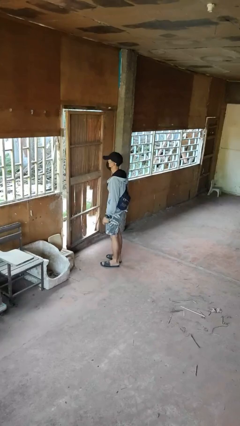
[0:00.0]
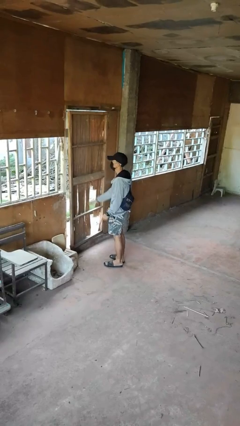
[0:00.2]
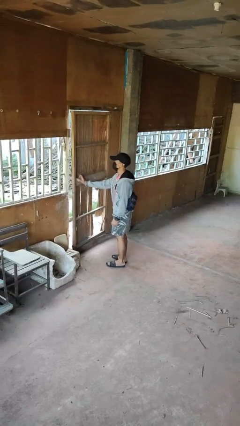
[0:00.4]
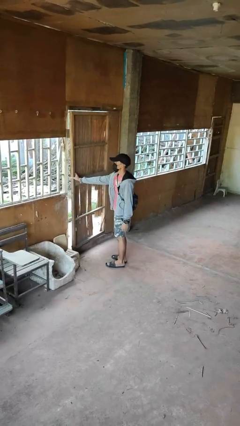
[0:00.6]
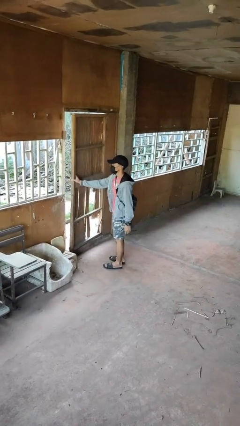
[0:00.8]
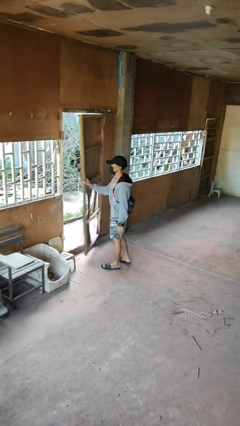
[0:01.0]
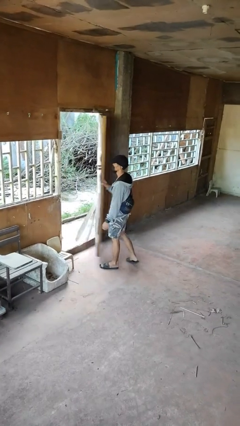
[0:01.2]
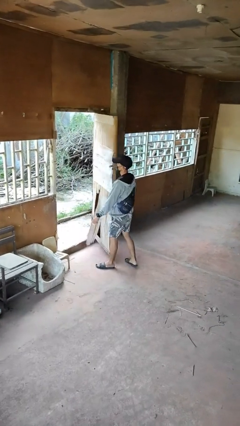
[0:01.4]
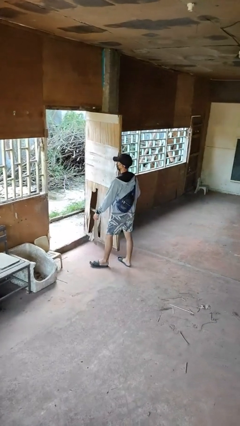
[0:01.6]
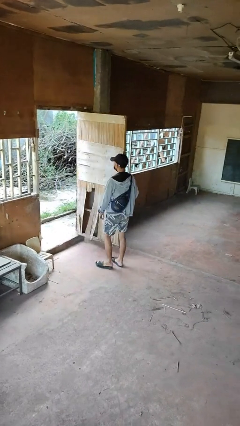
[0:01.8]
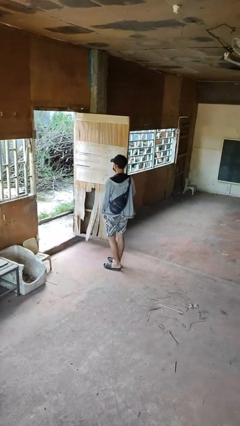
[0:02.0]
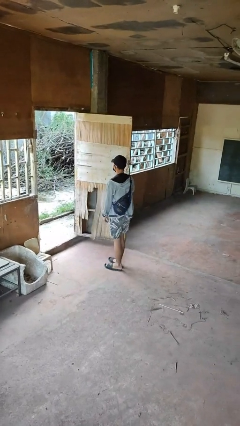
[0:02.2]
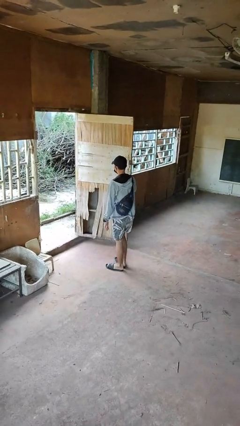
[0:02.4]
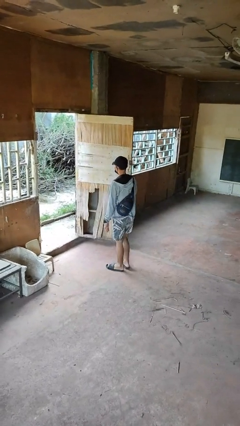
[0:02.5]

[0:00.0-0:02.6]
person opens facility door

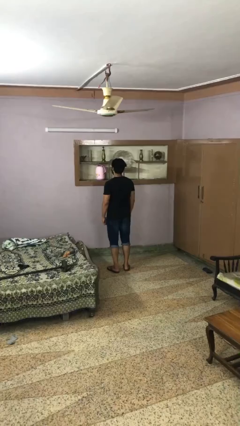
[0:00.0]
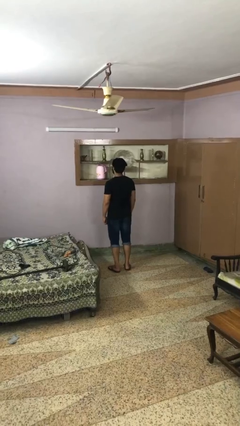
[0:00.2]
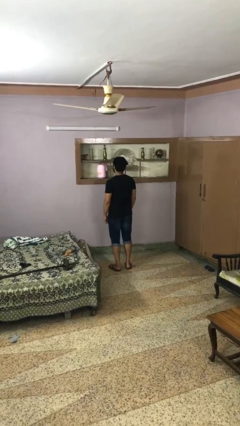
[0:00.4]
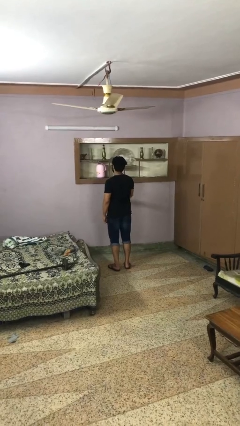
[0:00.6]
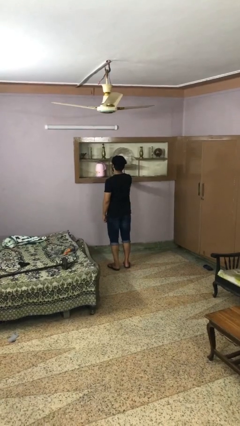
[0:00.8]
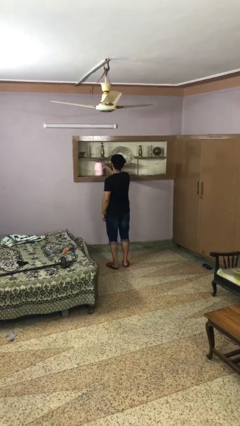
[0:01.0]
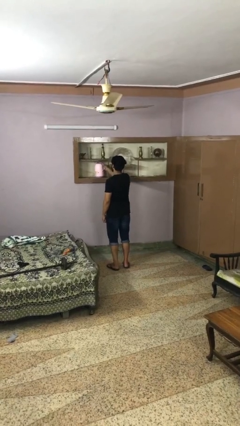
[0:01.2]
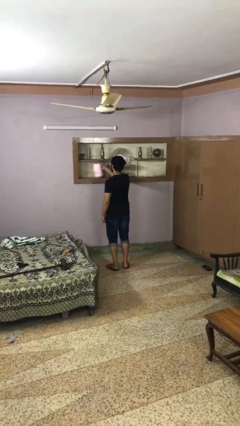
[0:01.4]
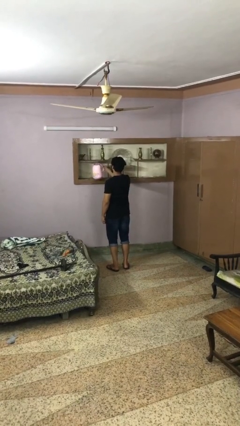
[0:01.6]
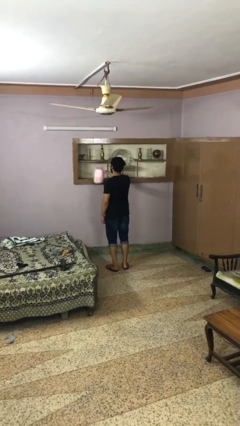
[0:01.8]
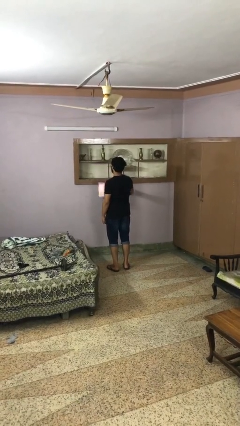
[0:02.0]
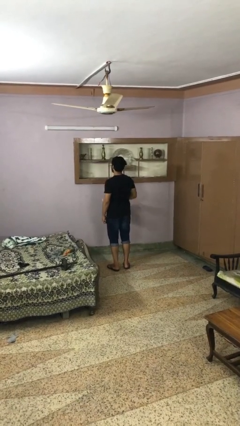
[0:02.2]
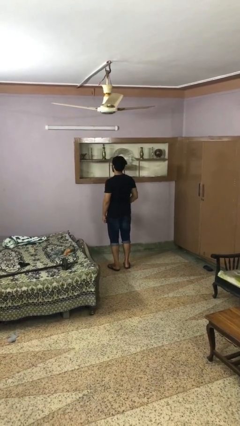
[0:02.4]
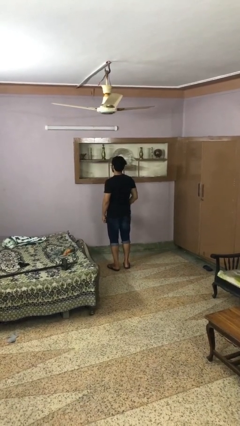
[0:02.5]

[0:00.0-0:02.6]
person picks up object from countertop

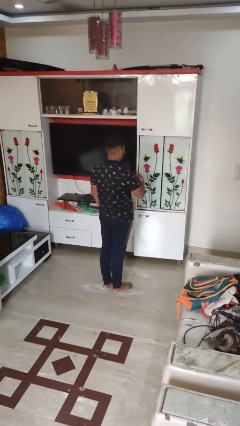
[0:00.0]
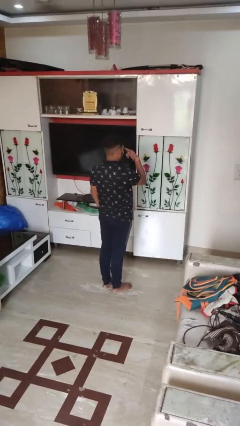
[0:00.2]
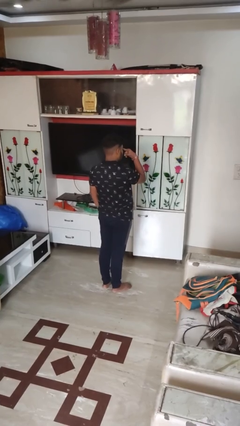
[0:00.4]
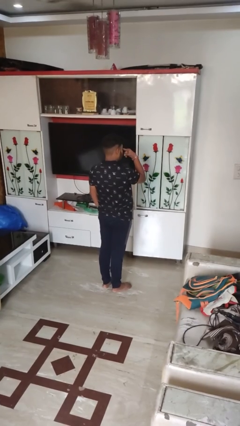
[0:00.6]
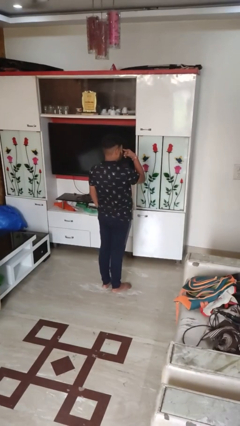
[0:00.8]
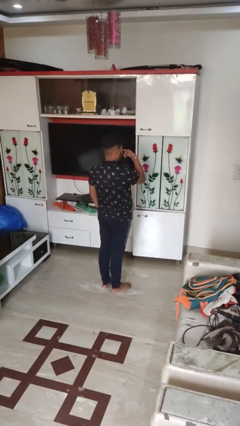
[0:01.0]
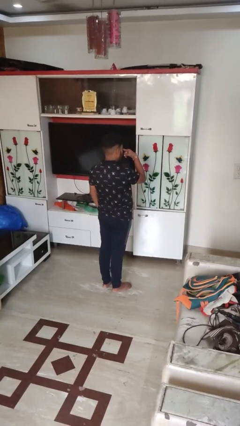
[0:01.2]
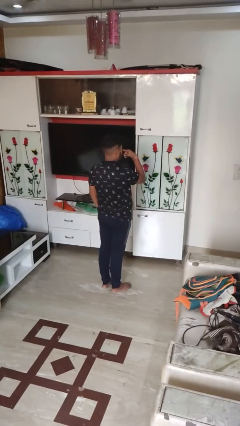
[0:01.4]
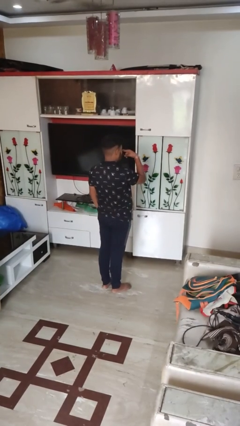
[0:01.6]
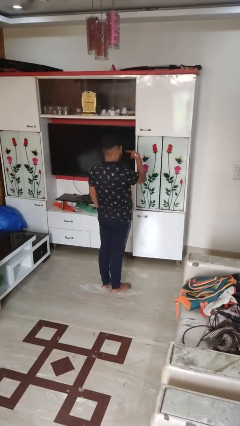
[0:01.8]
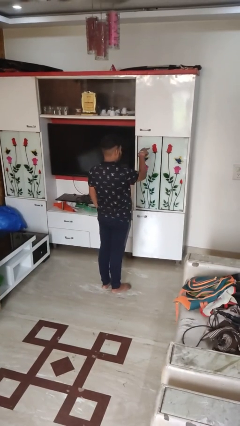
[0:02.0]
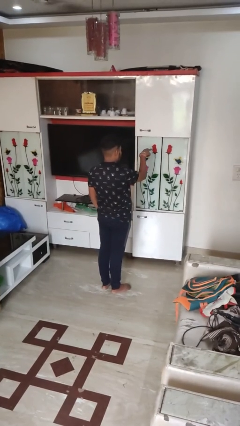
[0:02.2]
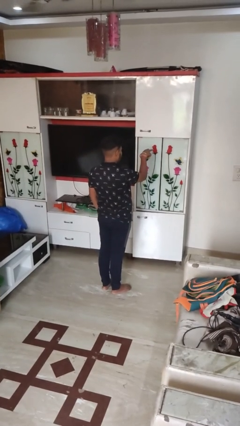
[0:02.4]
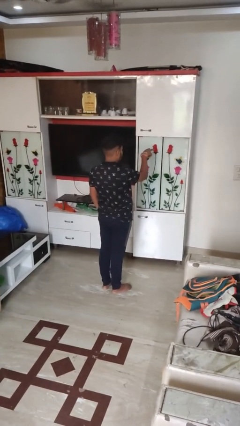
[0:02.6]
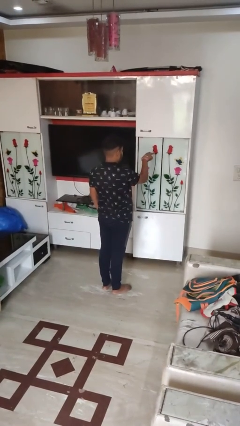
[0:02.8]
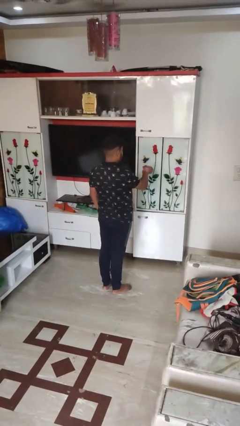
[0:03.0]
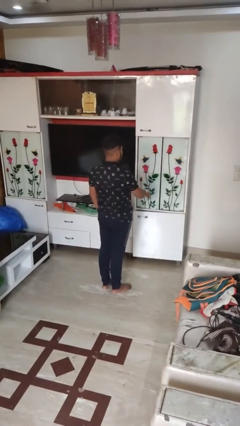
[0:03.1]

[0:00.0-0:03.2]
person gestures watch closely

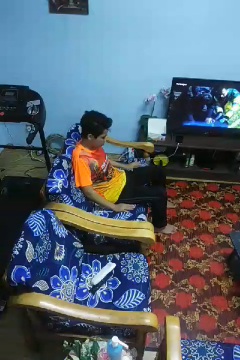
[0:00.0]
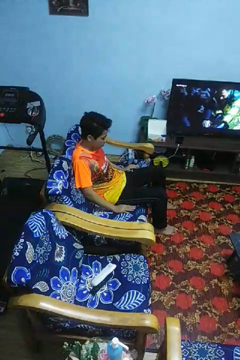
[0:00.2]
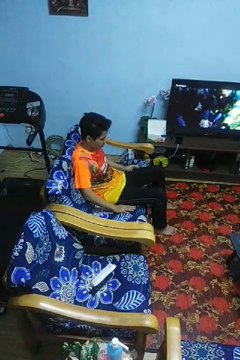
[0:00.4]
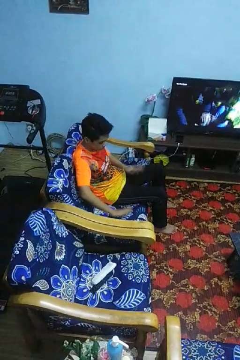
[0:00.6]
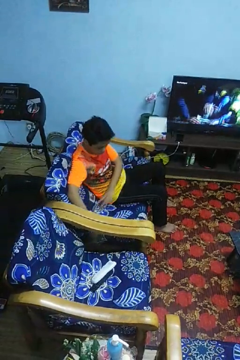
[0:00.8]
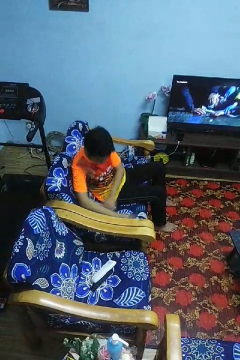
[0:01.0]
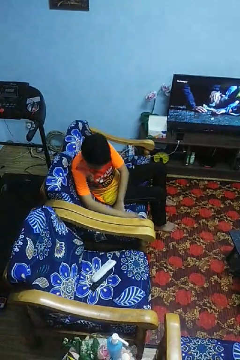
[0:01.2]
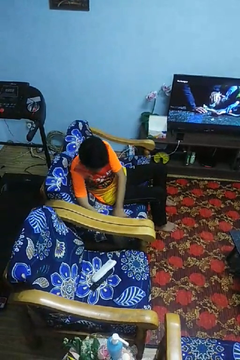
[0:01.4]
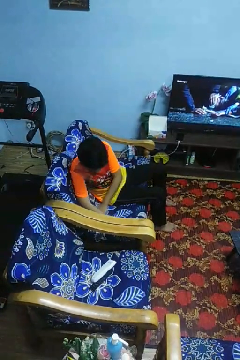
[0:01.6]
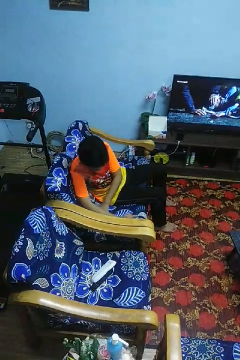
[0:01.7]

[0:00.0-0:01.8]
person searches in couch

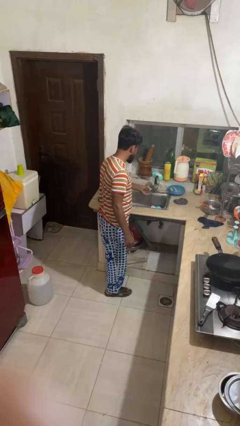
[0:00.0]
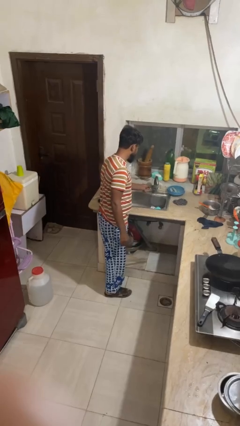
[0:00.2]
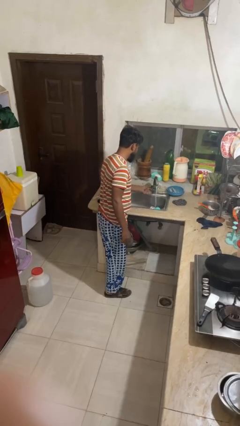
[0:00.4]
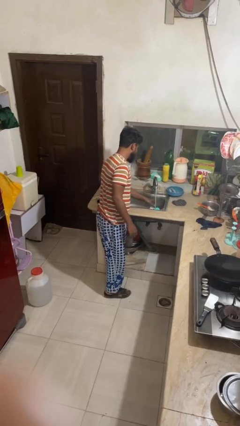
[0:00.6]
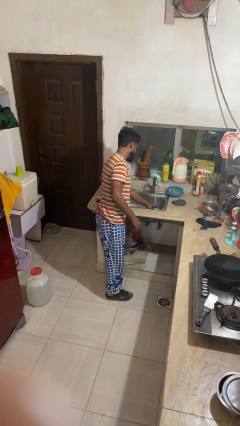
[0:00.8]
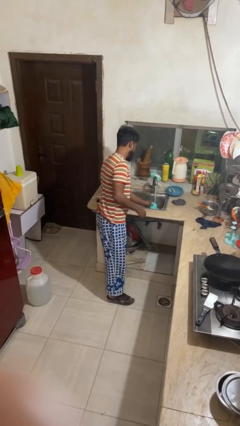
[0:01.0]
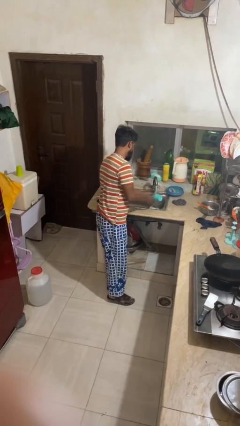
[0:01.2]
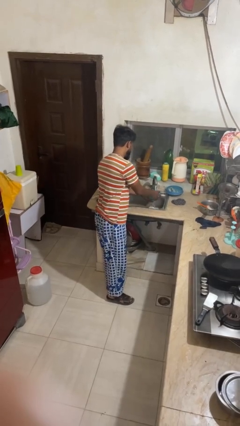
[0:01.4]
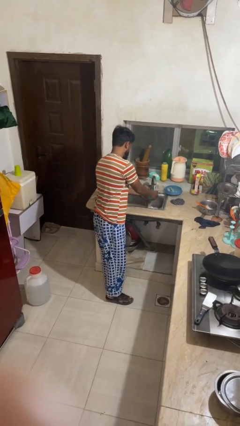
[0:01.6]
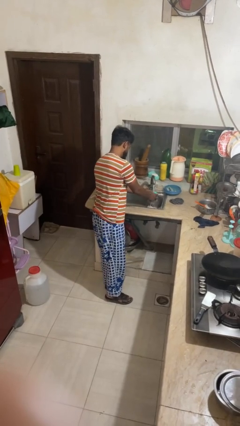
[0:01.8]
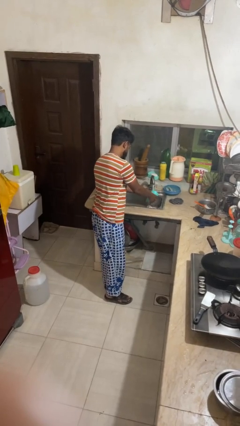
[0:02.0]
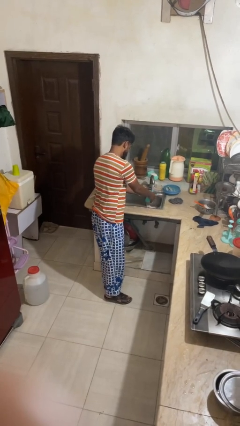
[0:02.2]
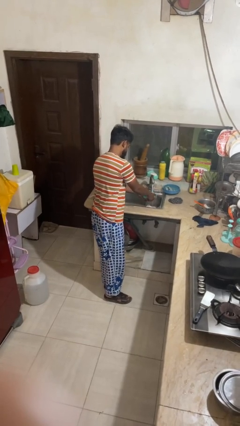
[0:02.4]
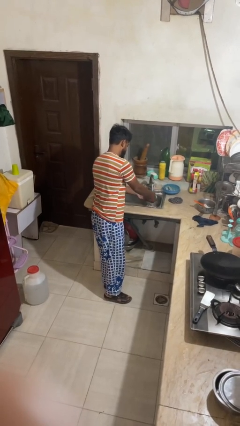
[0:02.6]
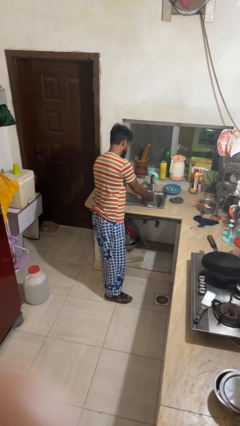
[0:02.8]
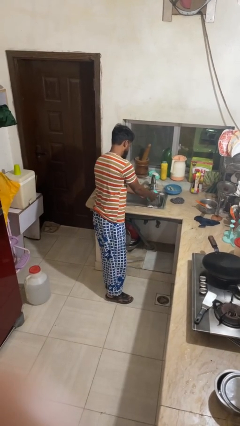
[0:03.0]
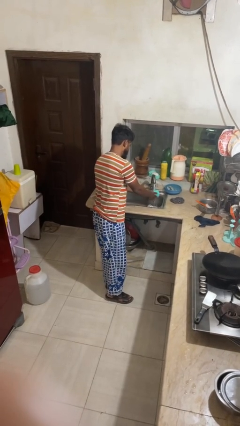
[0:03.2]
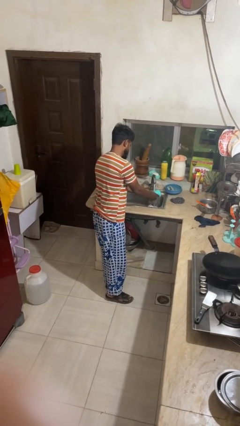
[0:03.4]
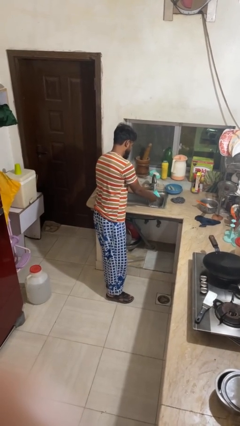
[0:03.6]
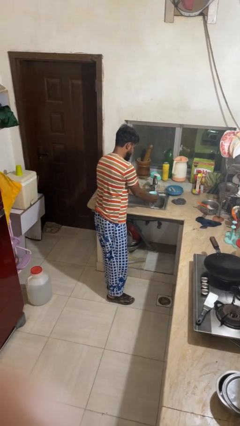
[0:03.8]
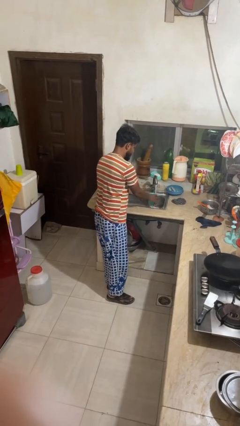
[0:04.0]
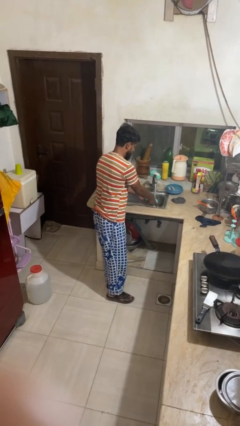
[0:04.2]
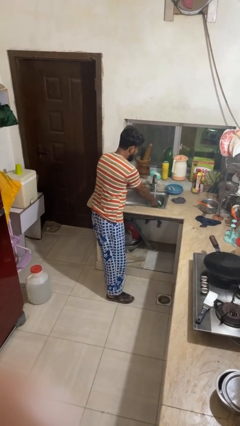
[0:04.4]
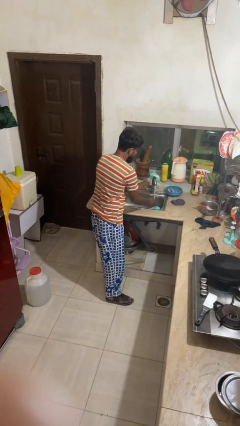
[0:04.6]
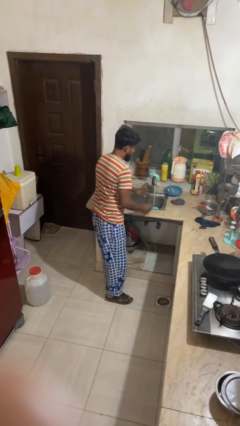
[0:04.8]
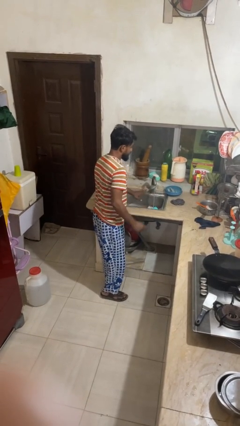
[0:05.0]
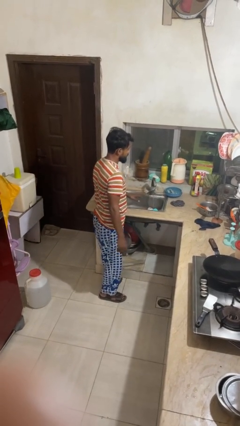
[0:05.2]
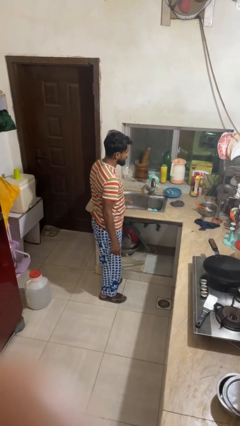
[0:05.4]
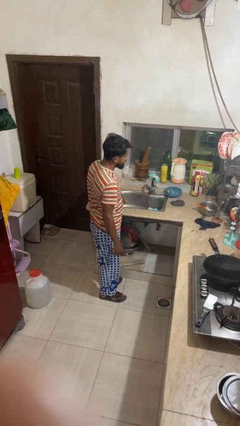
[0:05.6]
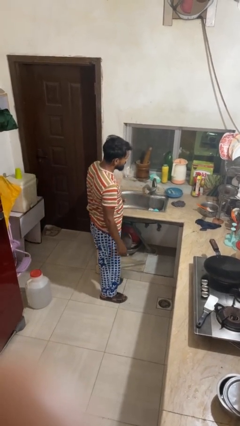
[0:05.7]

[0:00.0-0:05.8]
person washes dish

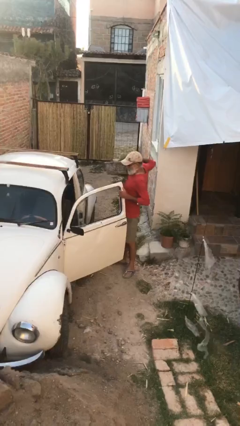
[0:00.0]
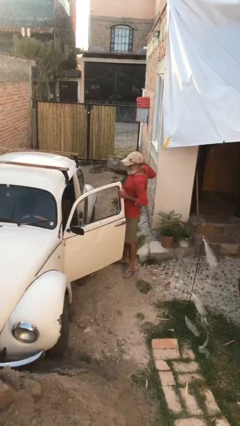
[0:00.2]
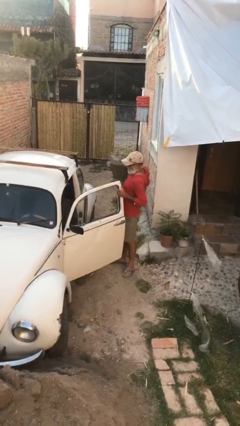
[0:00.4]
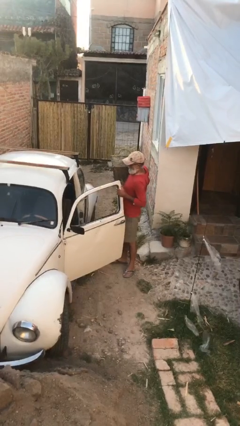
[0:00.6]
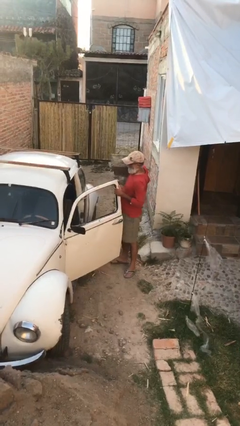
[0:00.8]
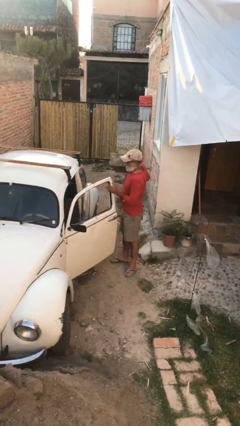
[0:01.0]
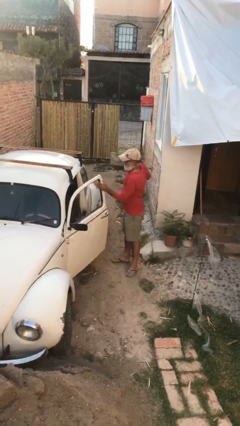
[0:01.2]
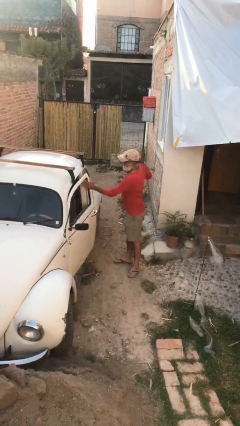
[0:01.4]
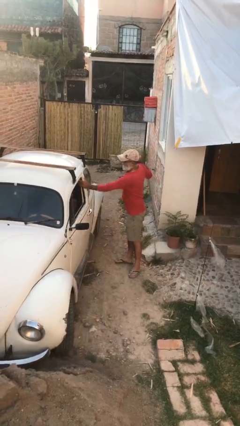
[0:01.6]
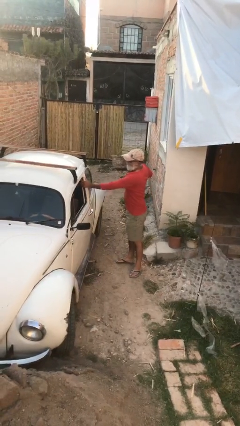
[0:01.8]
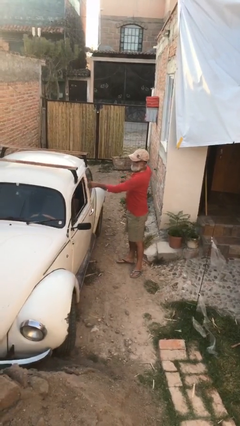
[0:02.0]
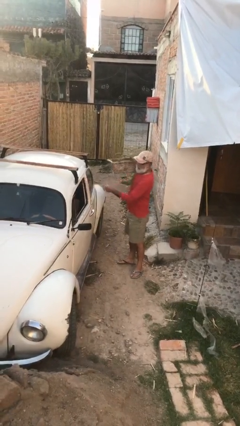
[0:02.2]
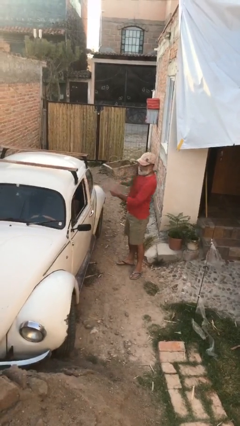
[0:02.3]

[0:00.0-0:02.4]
person closes car door
